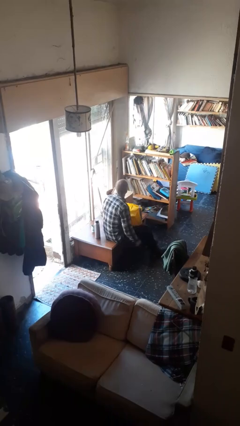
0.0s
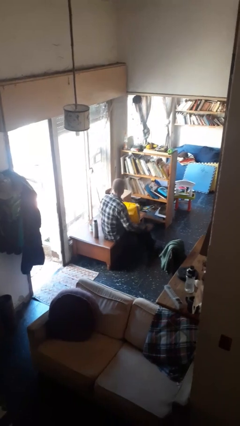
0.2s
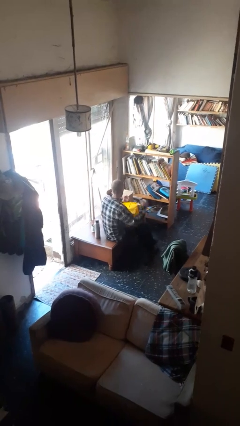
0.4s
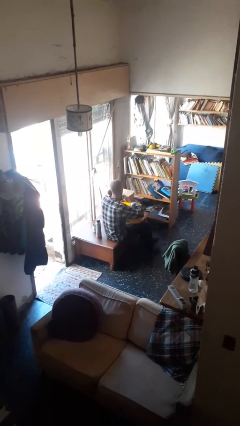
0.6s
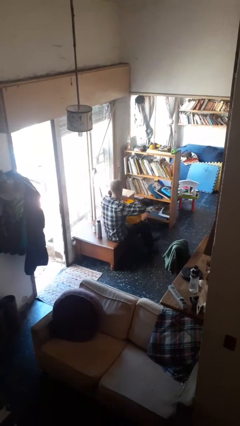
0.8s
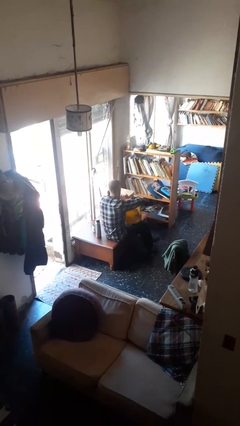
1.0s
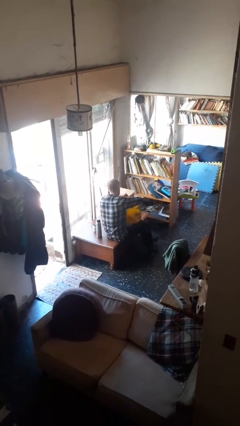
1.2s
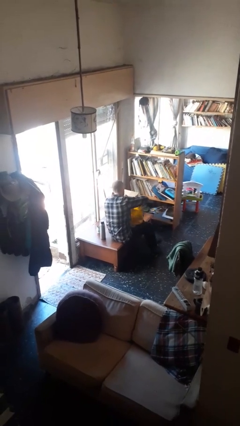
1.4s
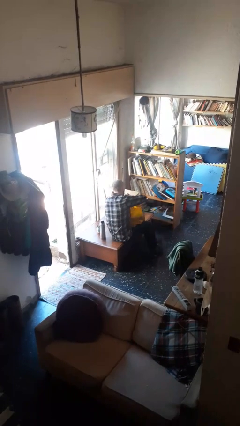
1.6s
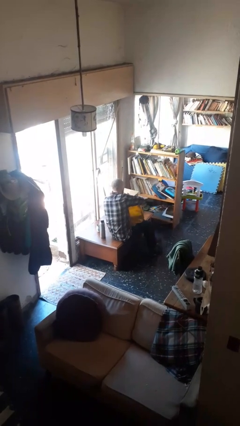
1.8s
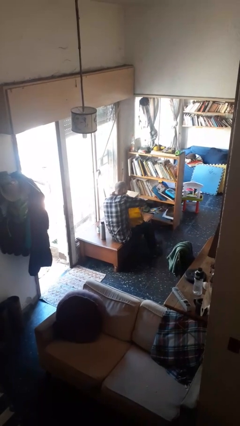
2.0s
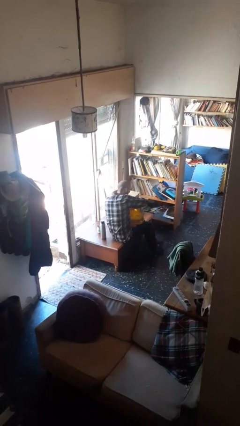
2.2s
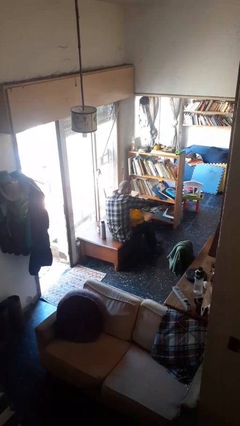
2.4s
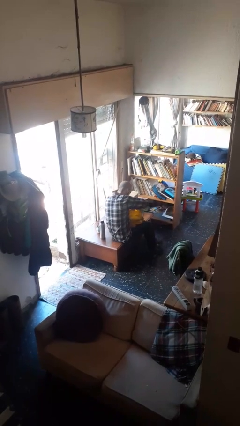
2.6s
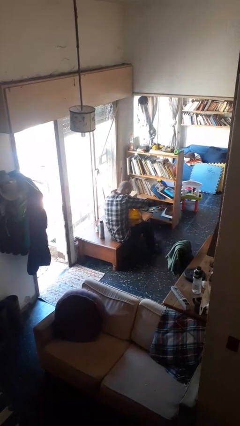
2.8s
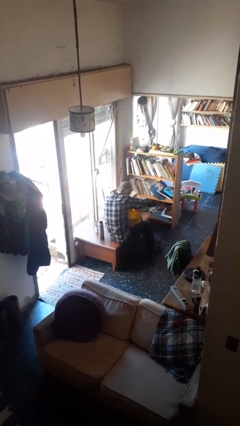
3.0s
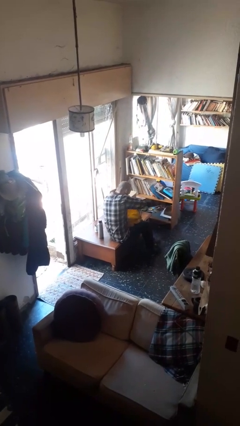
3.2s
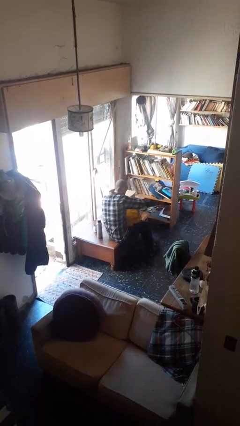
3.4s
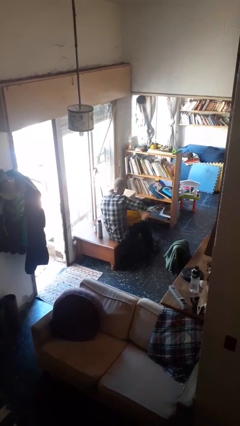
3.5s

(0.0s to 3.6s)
person searches in bag

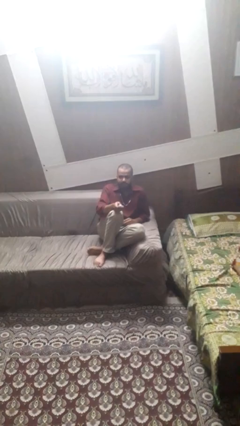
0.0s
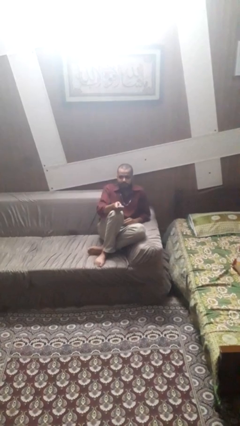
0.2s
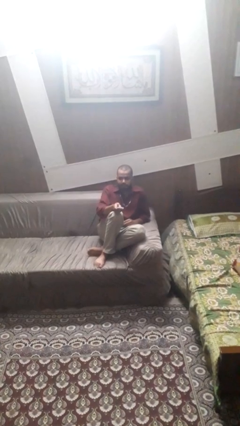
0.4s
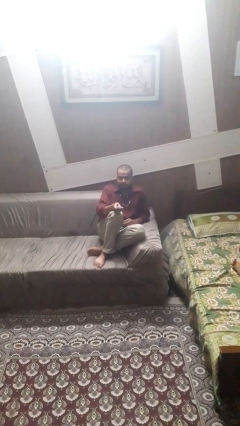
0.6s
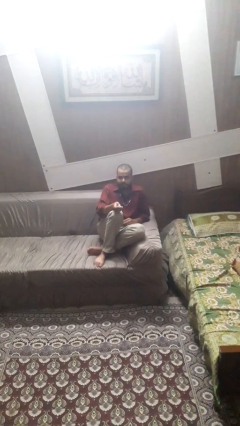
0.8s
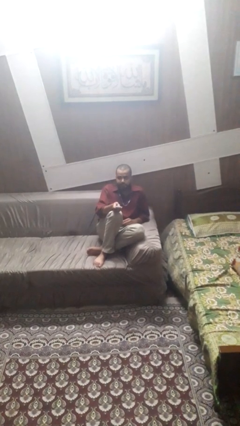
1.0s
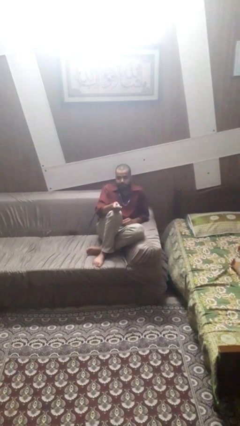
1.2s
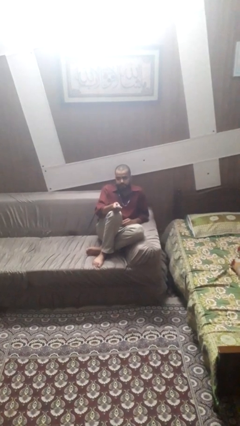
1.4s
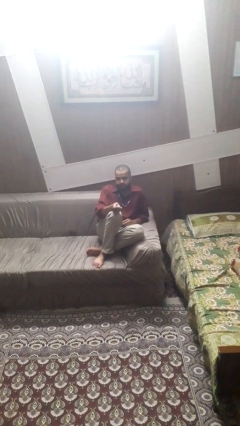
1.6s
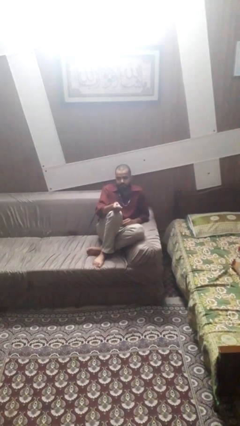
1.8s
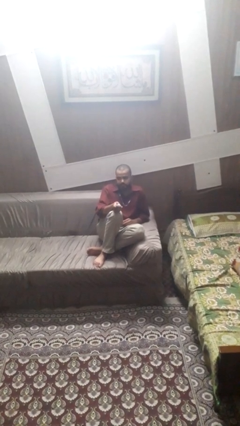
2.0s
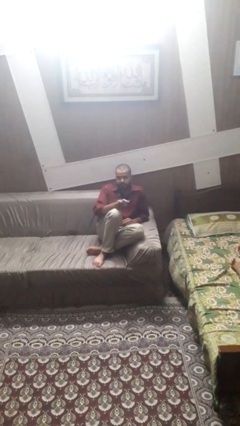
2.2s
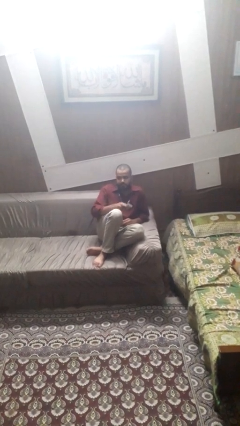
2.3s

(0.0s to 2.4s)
person uses television remote

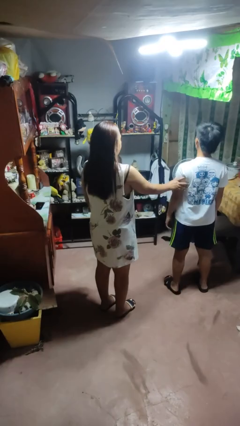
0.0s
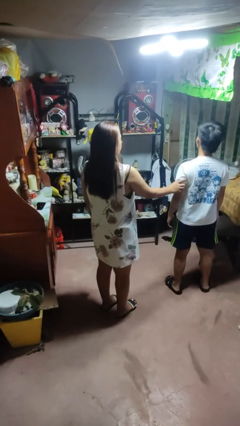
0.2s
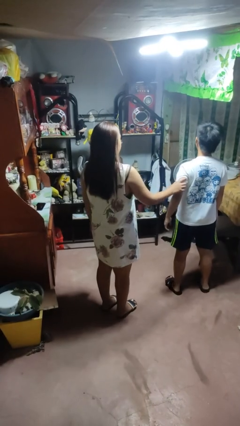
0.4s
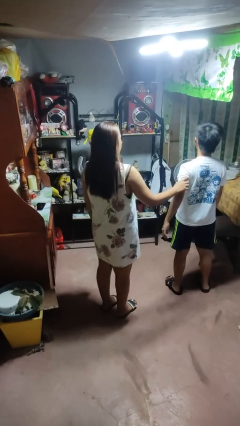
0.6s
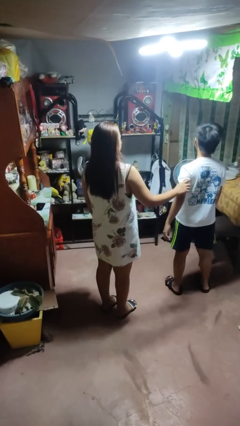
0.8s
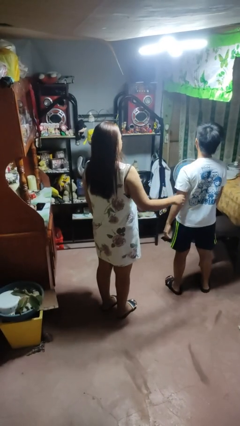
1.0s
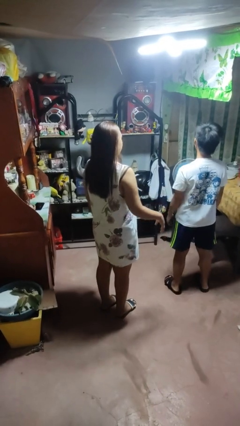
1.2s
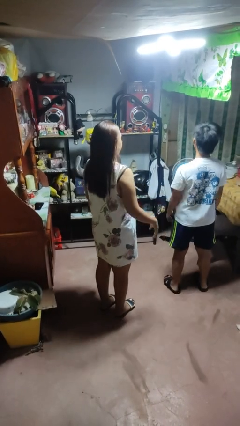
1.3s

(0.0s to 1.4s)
person grabs person by bicep

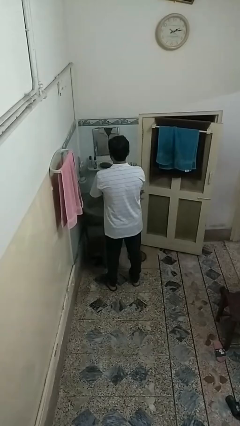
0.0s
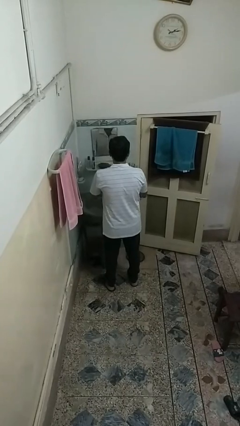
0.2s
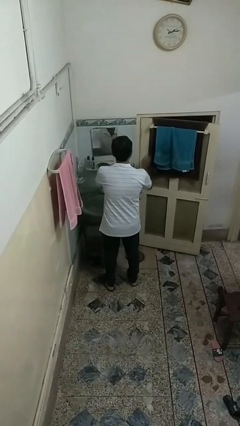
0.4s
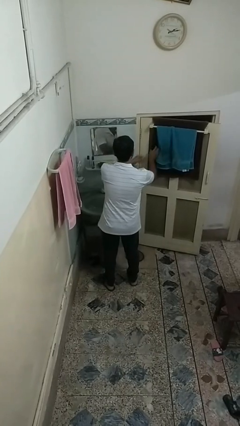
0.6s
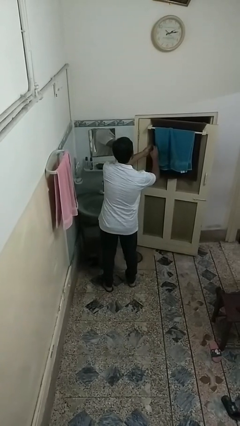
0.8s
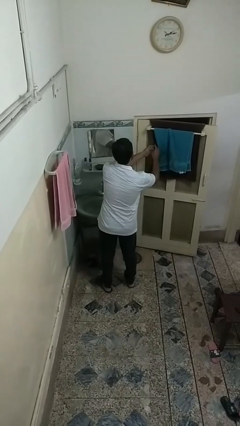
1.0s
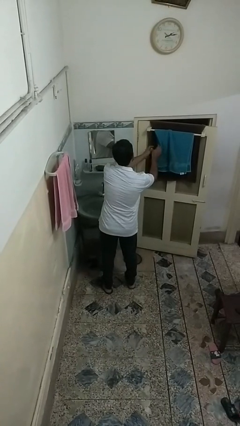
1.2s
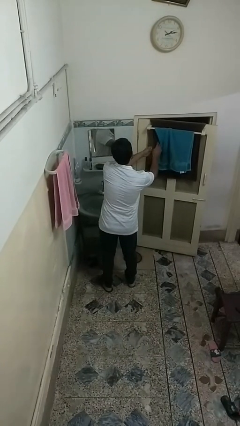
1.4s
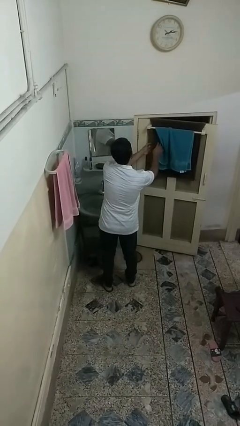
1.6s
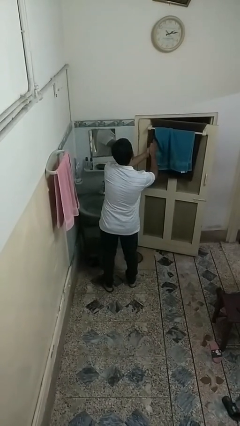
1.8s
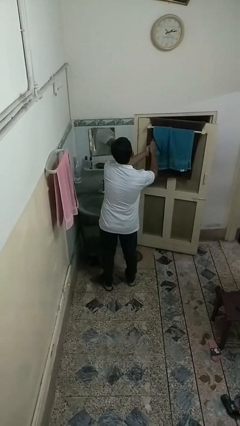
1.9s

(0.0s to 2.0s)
person dries hands with towel

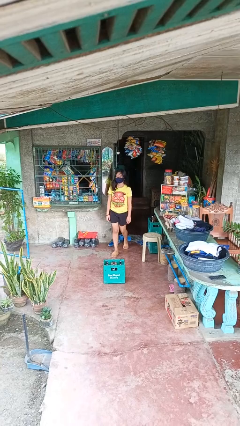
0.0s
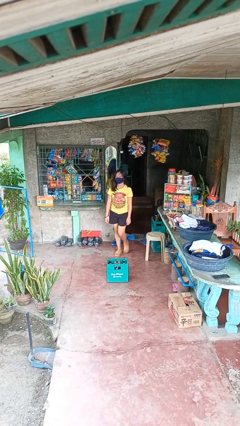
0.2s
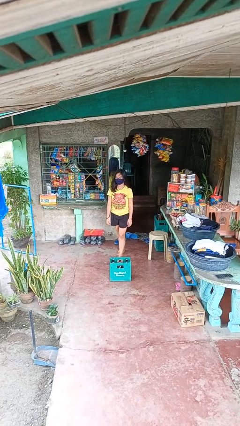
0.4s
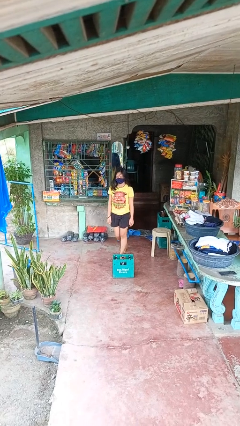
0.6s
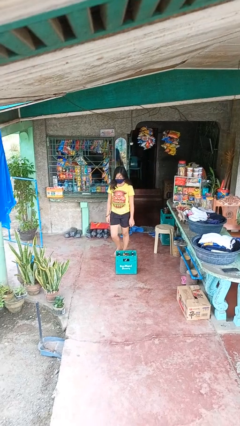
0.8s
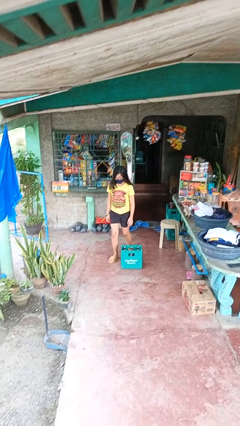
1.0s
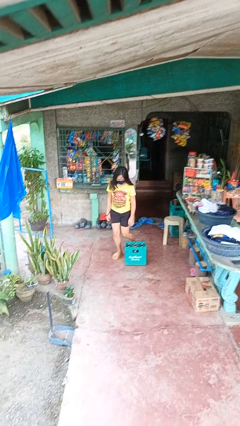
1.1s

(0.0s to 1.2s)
person trips on object on floor

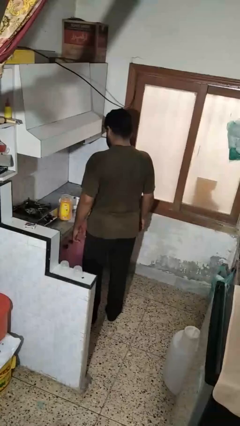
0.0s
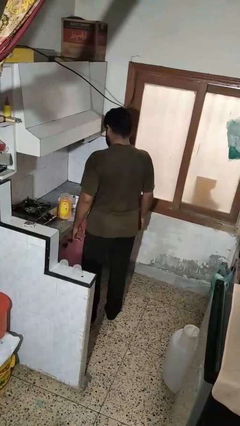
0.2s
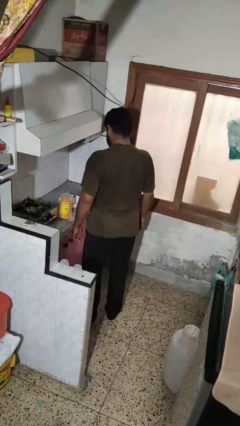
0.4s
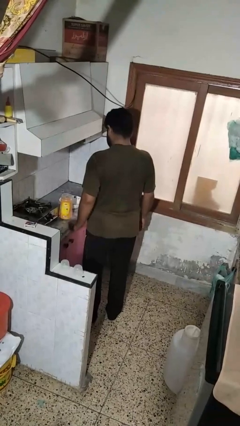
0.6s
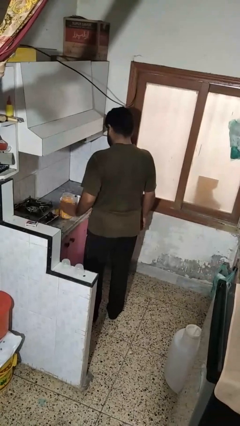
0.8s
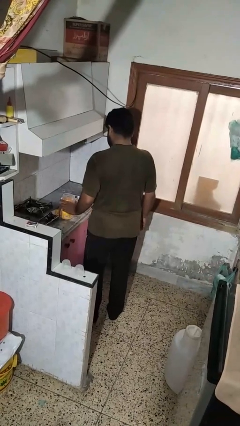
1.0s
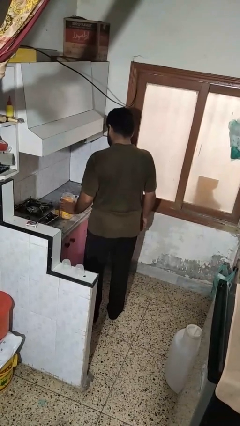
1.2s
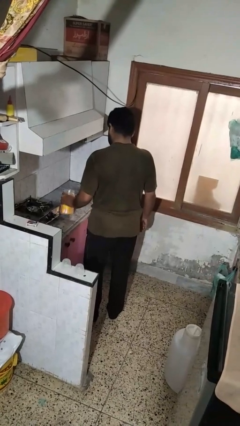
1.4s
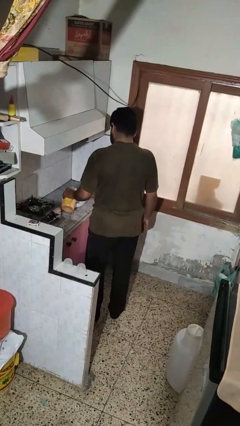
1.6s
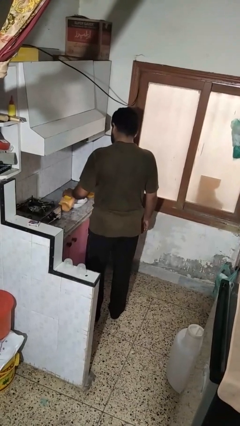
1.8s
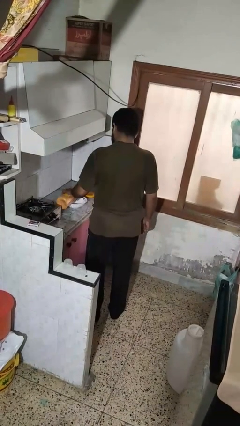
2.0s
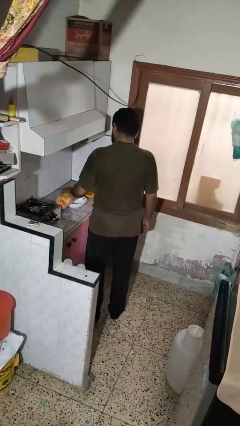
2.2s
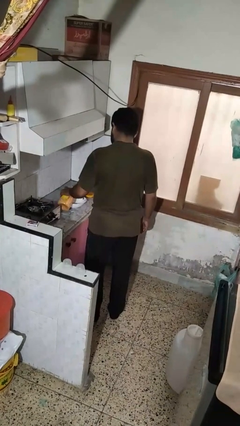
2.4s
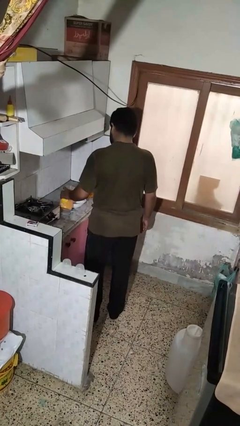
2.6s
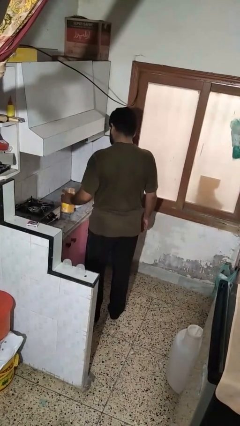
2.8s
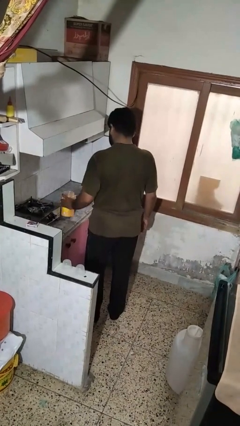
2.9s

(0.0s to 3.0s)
person pours into bowl

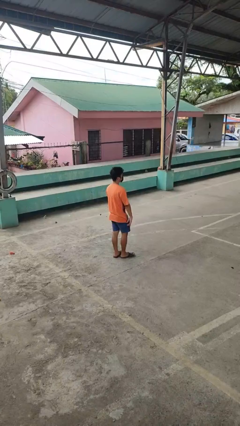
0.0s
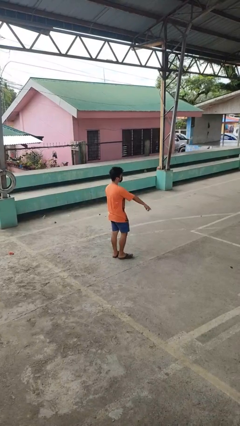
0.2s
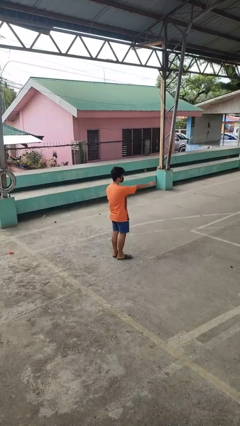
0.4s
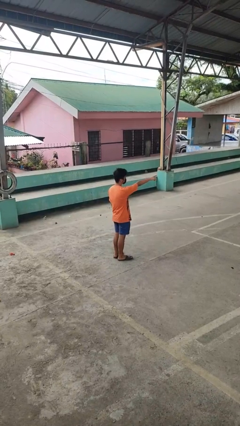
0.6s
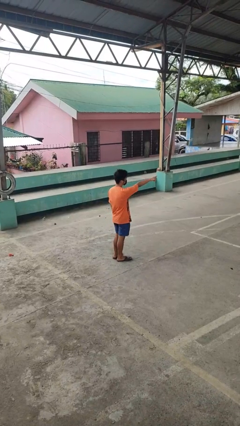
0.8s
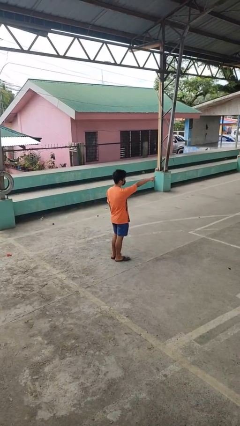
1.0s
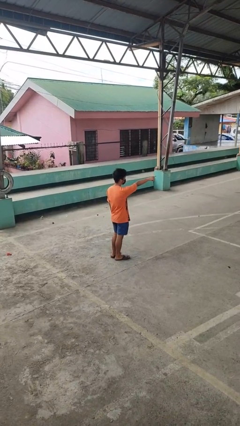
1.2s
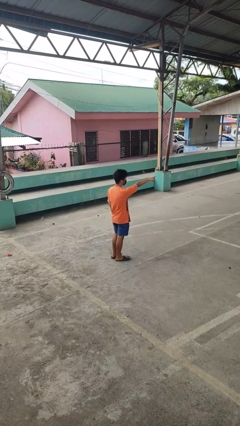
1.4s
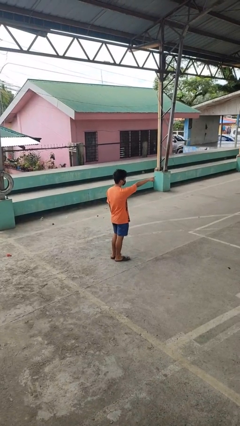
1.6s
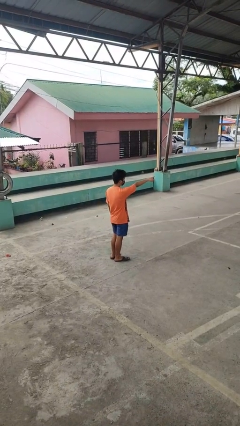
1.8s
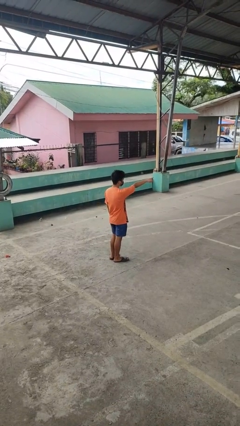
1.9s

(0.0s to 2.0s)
person points at person

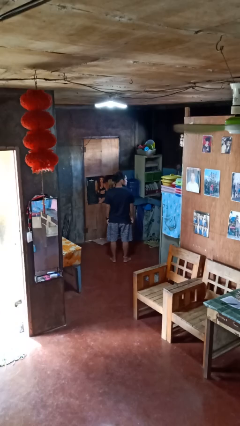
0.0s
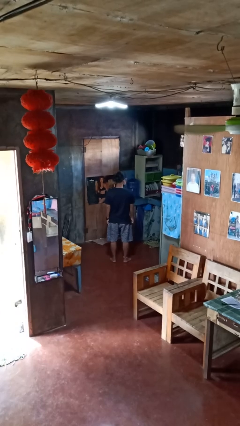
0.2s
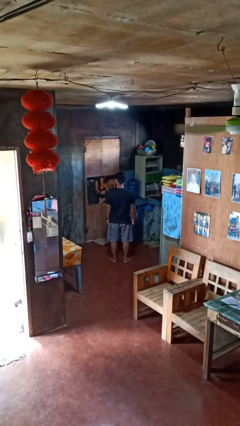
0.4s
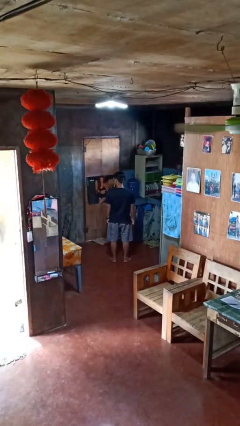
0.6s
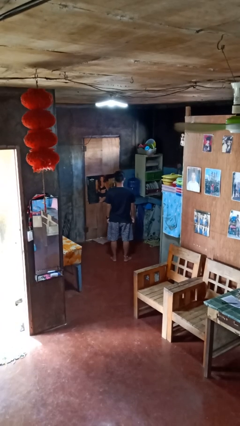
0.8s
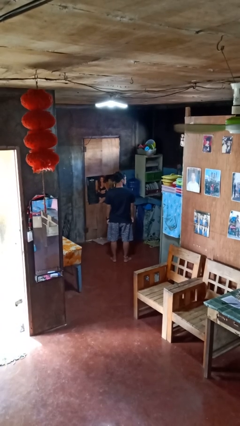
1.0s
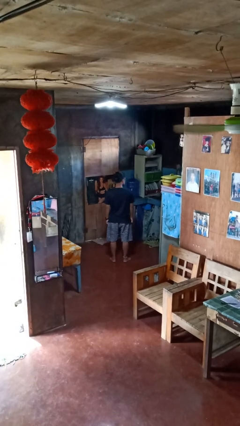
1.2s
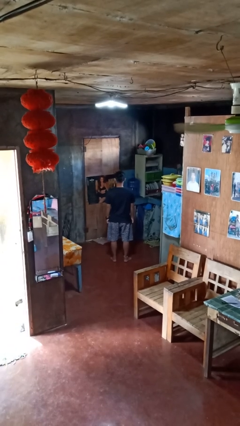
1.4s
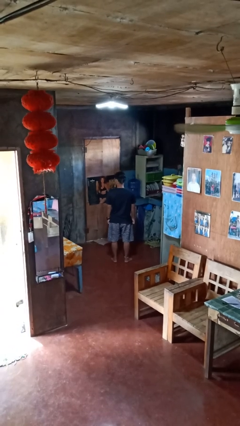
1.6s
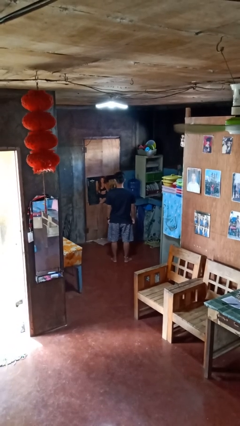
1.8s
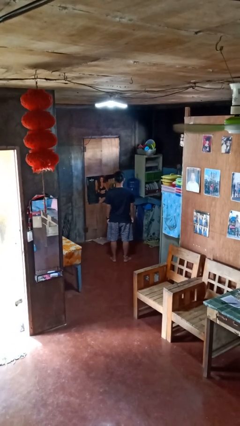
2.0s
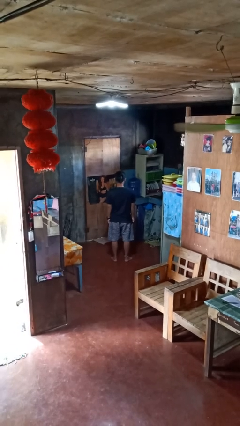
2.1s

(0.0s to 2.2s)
person shakes head
